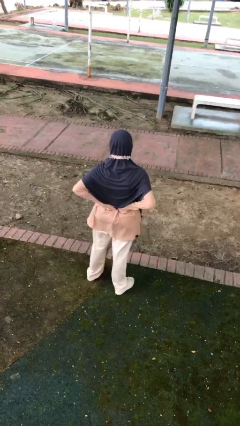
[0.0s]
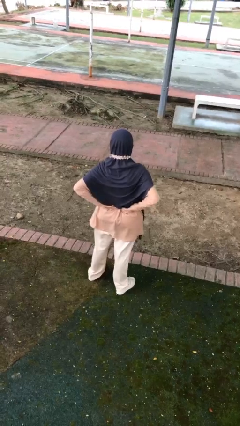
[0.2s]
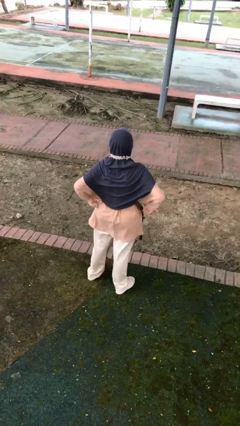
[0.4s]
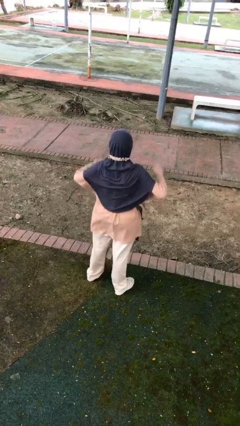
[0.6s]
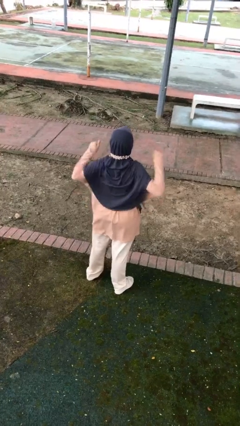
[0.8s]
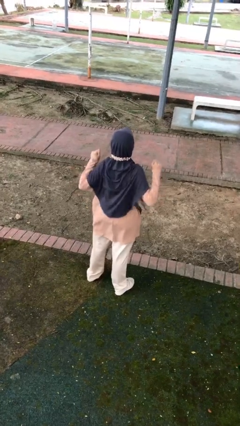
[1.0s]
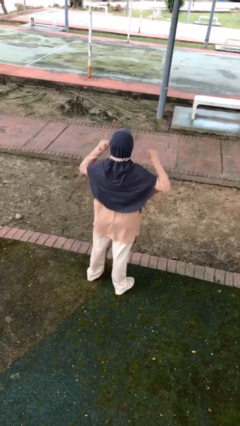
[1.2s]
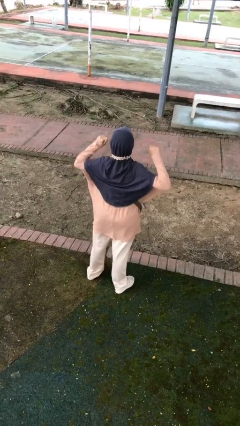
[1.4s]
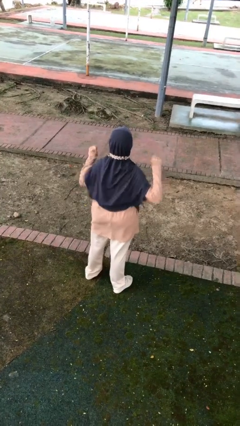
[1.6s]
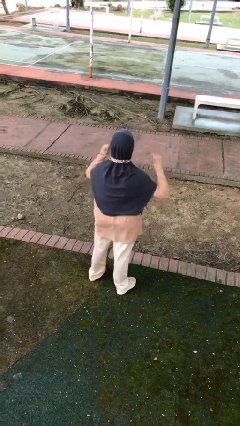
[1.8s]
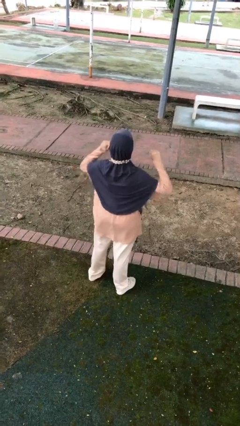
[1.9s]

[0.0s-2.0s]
person stretches arms to side

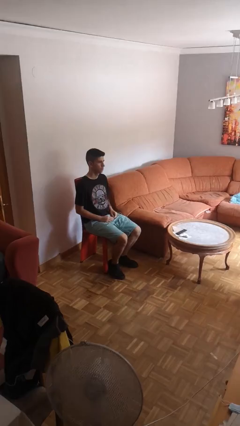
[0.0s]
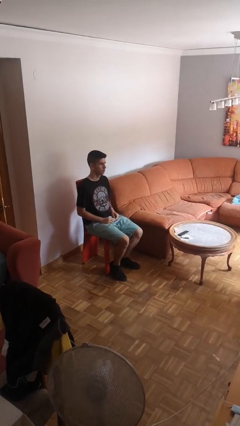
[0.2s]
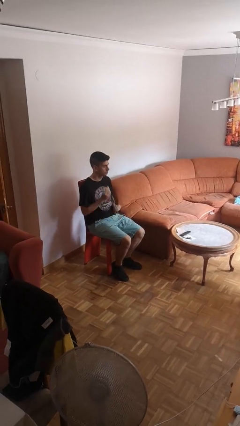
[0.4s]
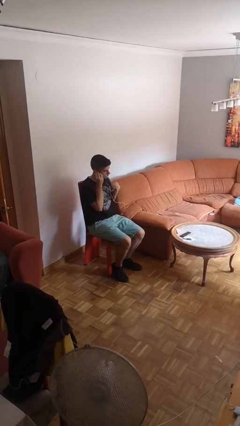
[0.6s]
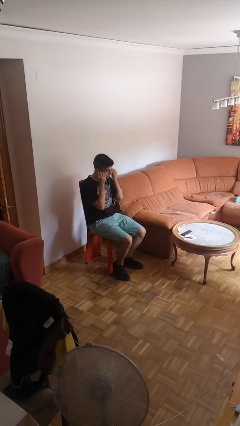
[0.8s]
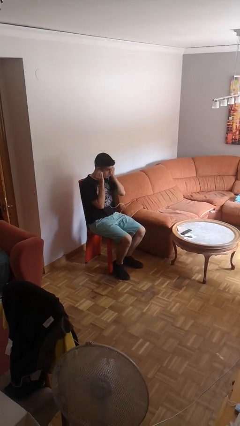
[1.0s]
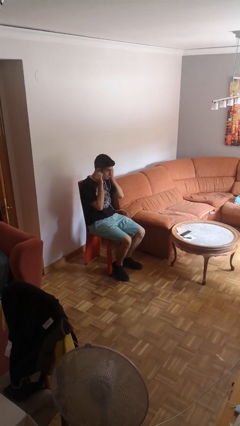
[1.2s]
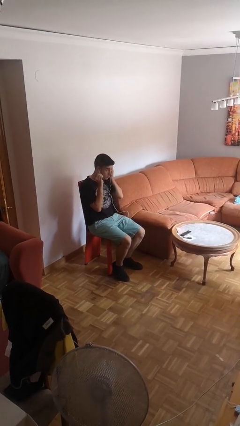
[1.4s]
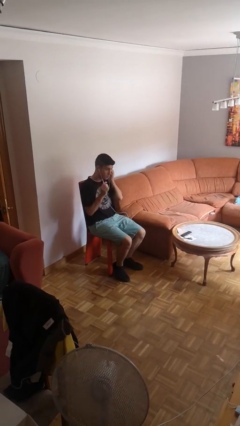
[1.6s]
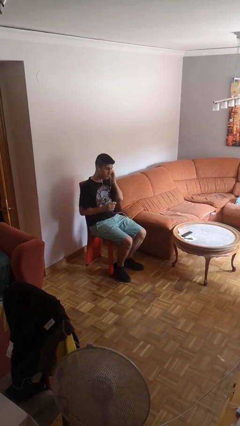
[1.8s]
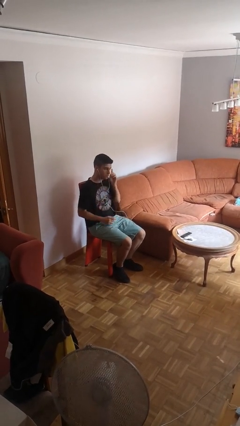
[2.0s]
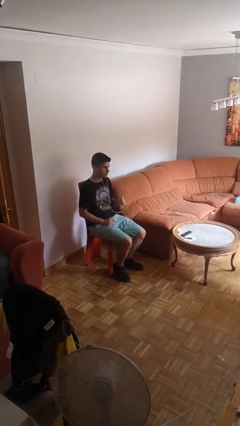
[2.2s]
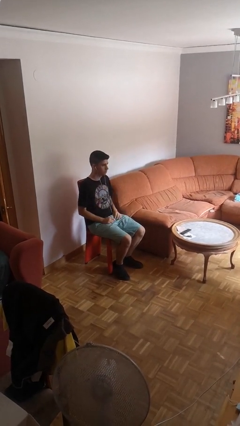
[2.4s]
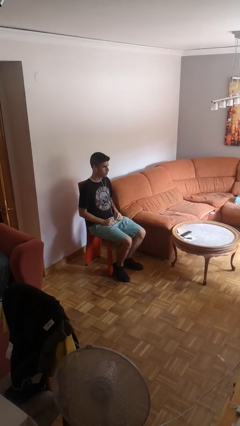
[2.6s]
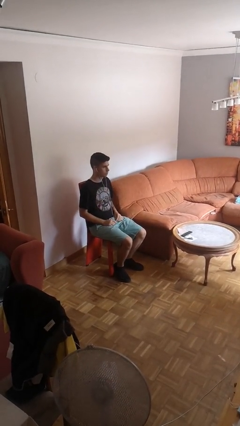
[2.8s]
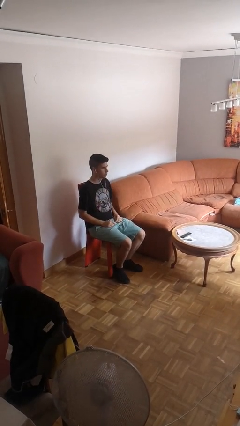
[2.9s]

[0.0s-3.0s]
person puts on headphones

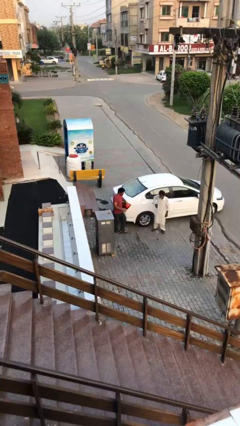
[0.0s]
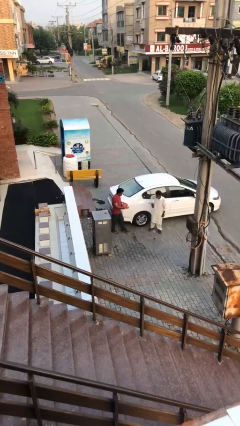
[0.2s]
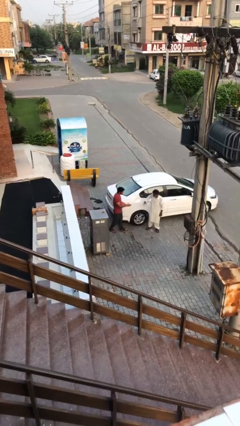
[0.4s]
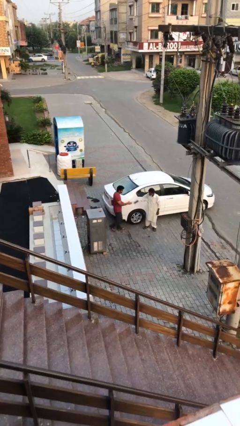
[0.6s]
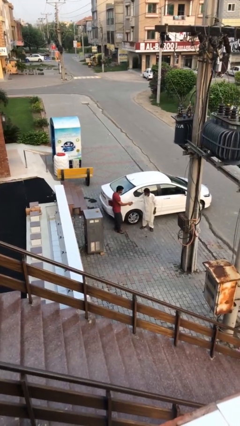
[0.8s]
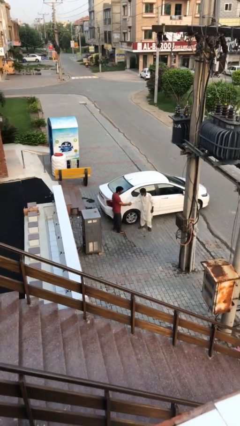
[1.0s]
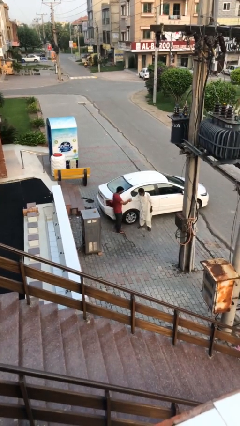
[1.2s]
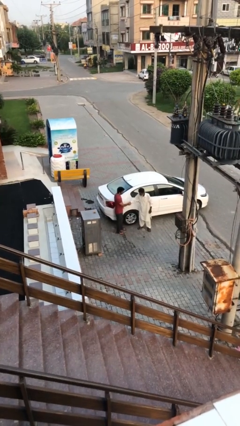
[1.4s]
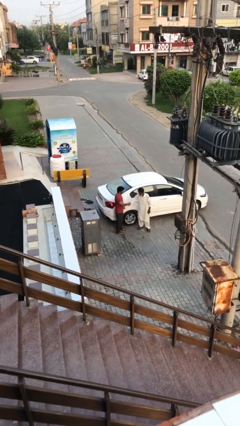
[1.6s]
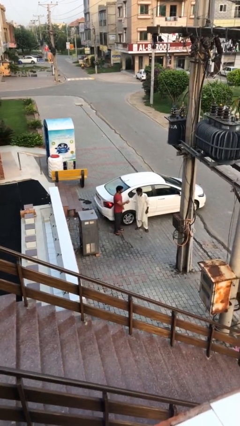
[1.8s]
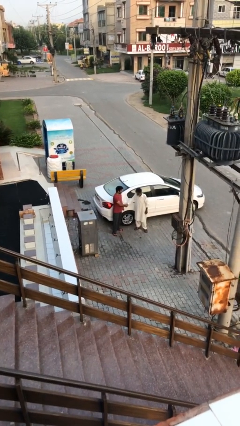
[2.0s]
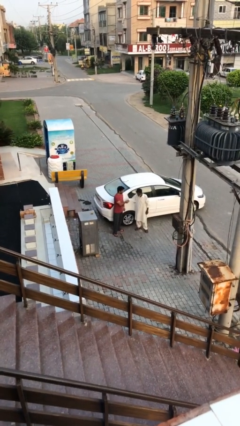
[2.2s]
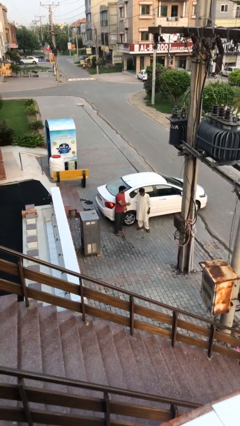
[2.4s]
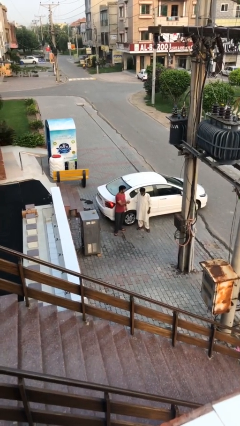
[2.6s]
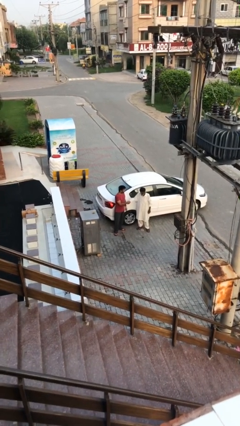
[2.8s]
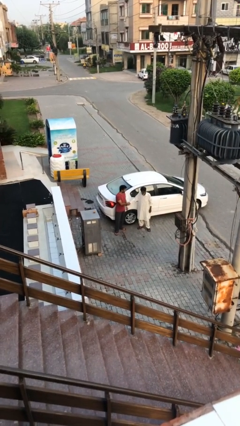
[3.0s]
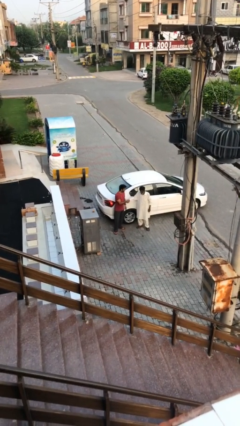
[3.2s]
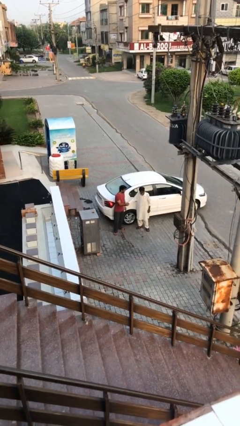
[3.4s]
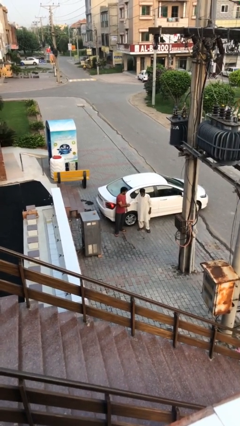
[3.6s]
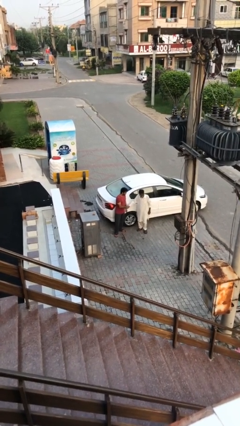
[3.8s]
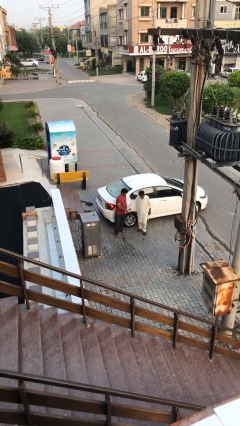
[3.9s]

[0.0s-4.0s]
person shakes hand

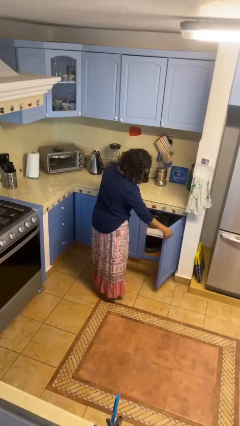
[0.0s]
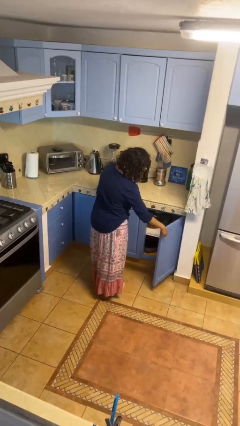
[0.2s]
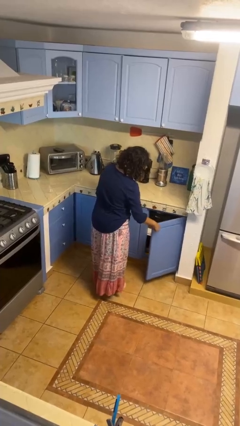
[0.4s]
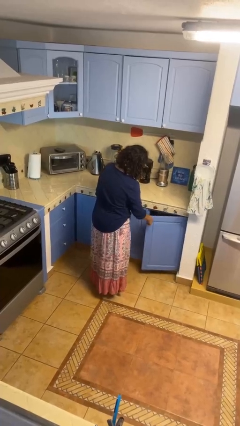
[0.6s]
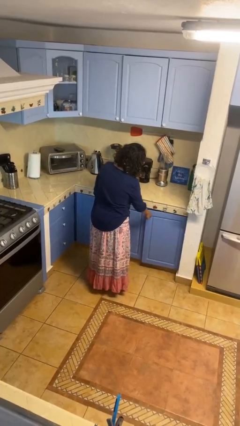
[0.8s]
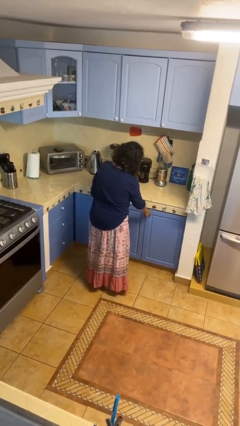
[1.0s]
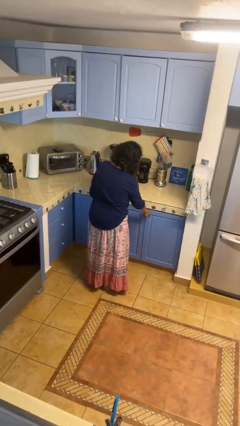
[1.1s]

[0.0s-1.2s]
person closes cabinet

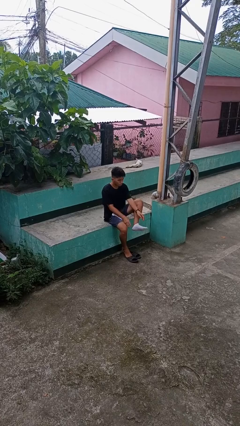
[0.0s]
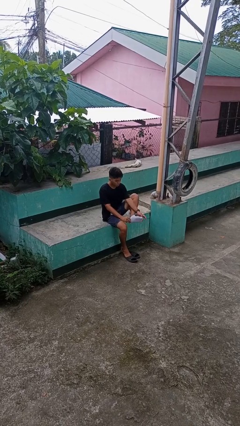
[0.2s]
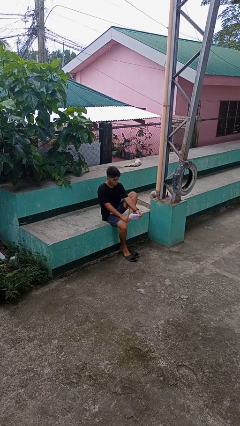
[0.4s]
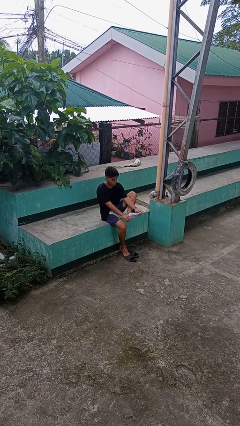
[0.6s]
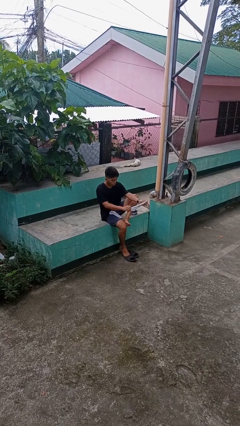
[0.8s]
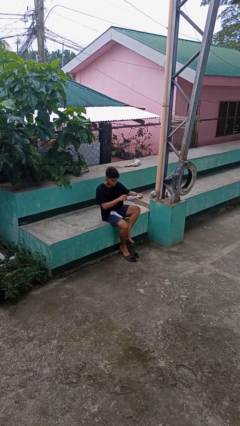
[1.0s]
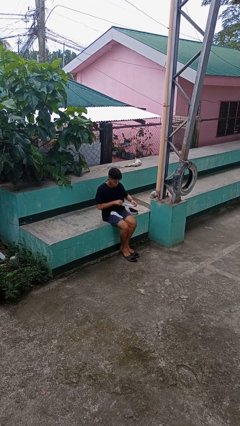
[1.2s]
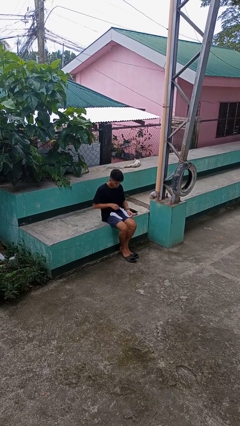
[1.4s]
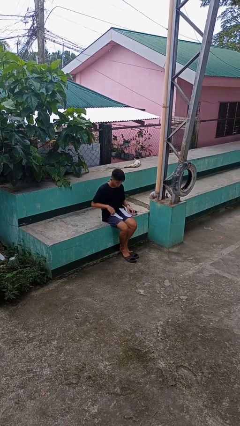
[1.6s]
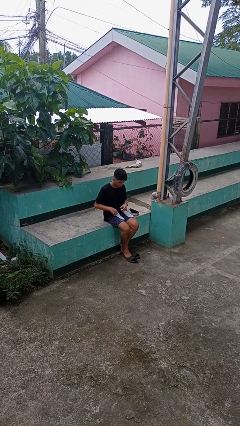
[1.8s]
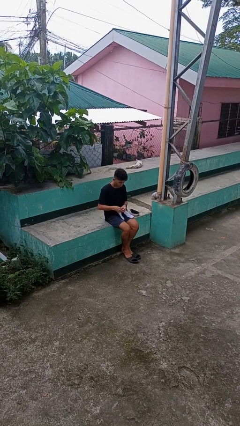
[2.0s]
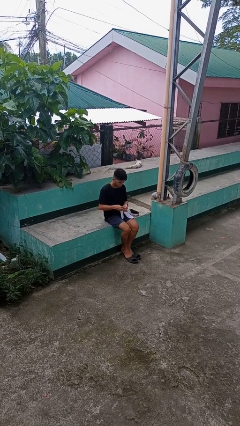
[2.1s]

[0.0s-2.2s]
person takes off socks

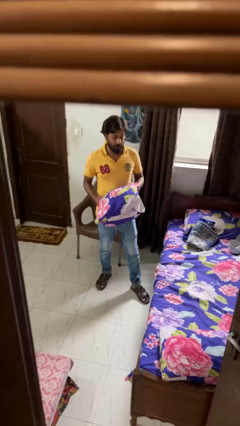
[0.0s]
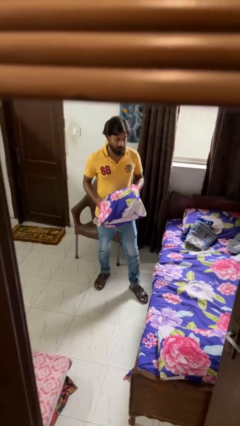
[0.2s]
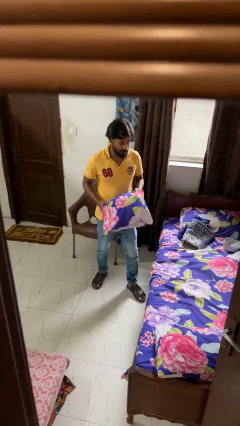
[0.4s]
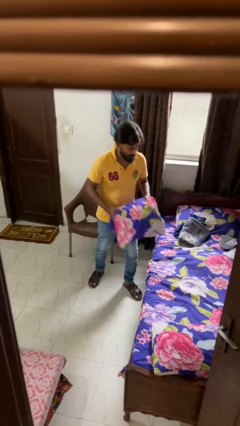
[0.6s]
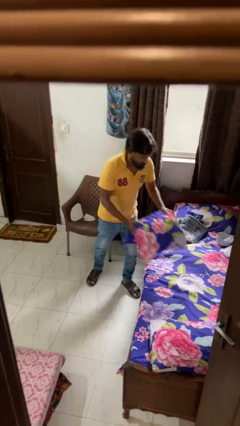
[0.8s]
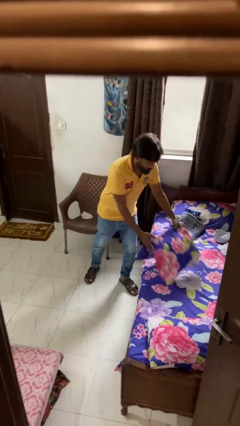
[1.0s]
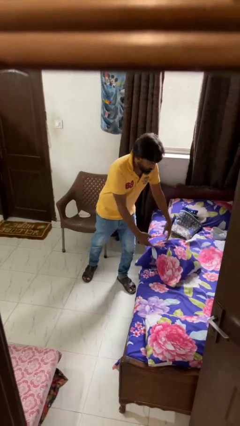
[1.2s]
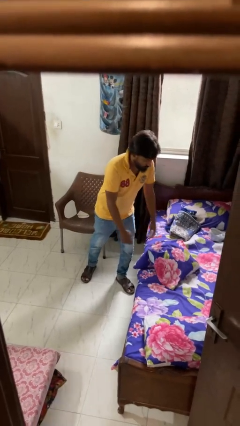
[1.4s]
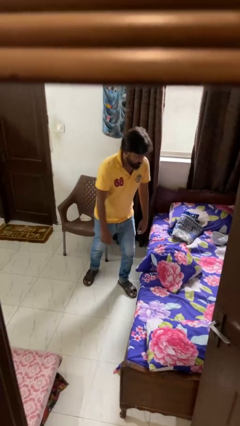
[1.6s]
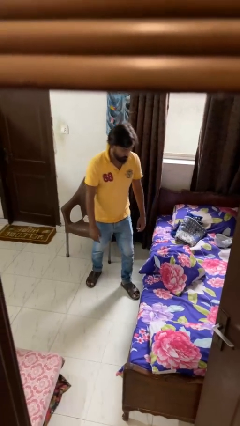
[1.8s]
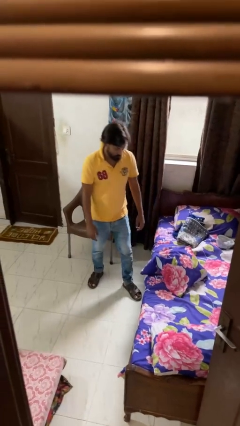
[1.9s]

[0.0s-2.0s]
person puts down object on bed

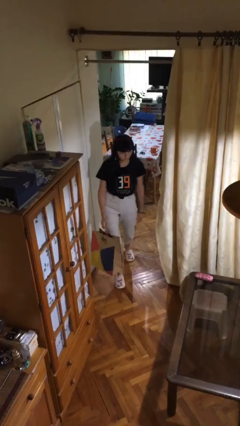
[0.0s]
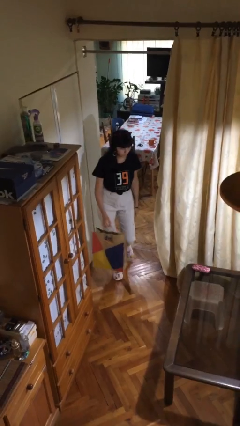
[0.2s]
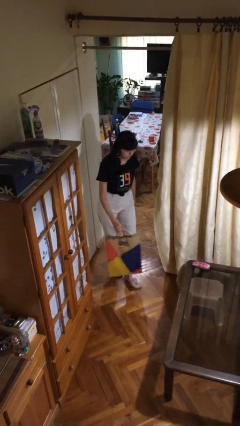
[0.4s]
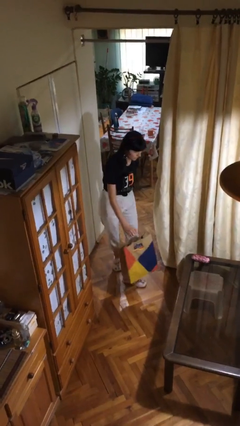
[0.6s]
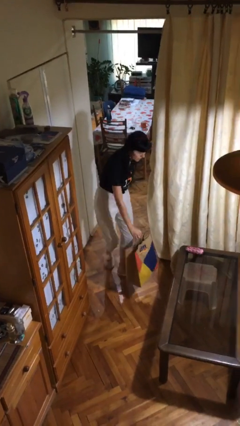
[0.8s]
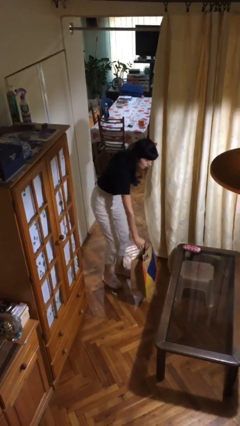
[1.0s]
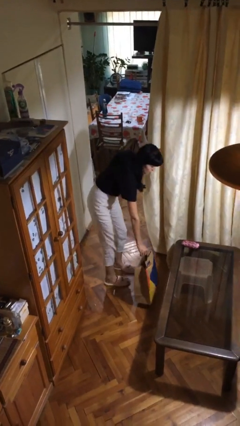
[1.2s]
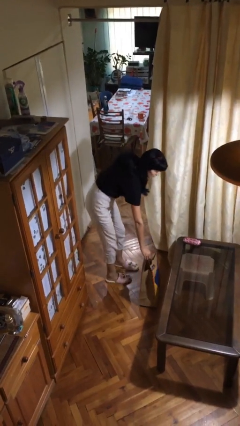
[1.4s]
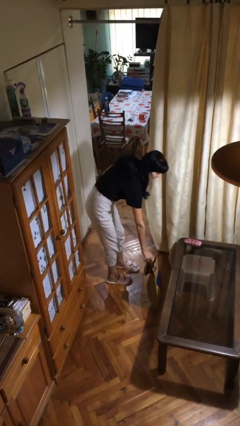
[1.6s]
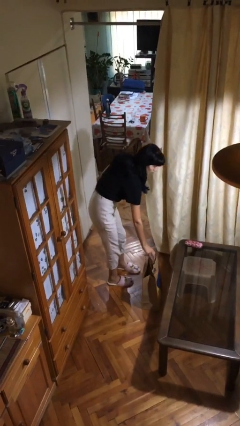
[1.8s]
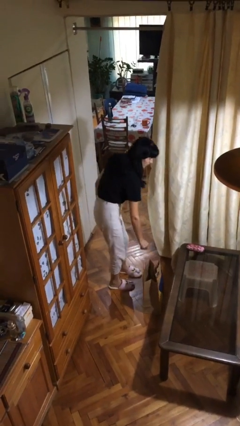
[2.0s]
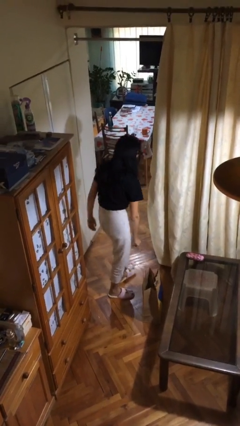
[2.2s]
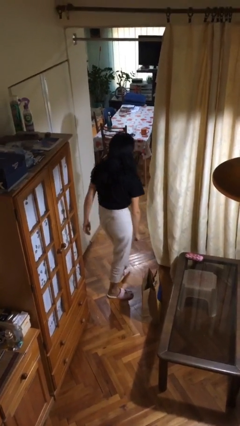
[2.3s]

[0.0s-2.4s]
person puts down object on floor

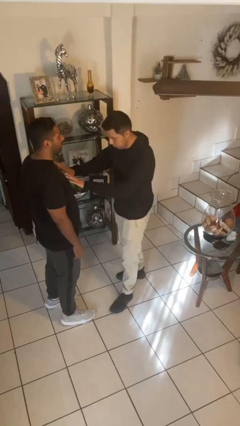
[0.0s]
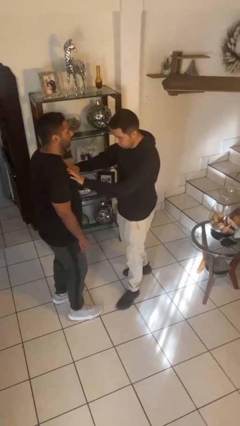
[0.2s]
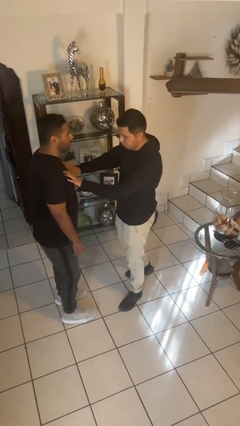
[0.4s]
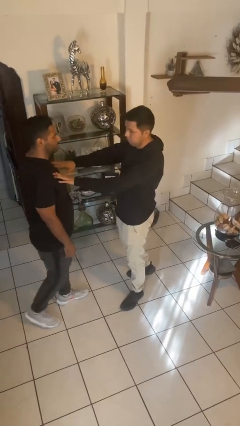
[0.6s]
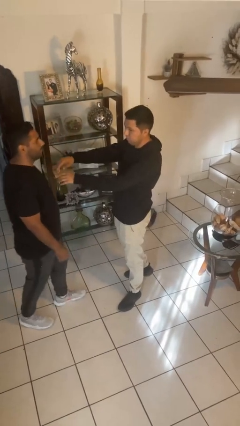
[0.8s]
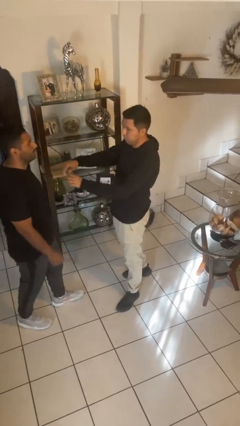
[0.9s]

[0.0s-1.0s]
person shoves person
